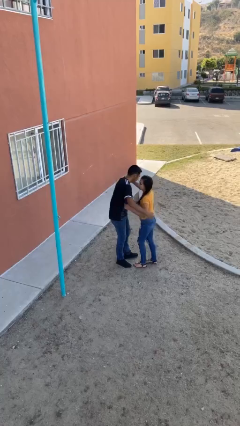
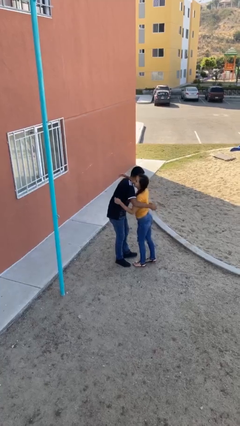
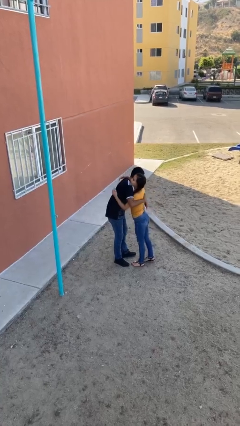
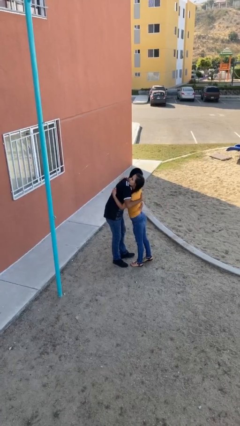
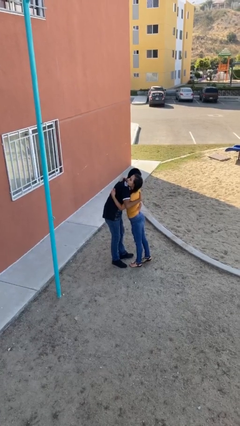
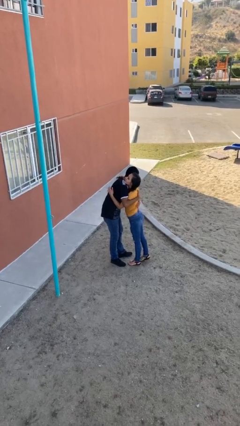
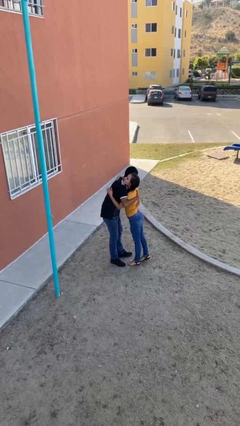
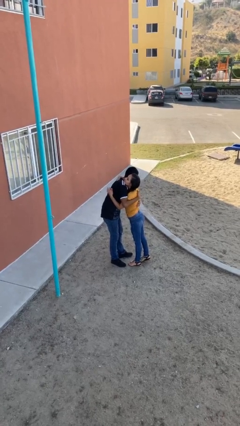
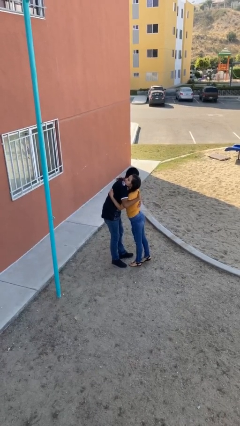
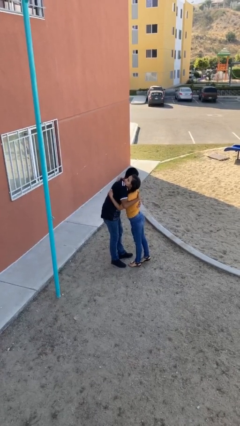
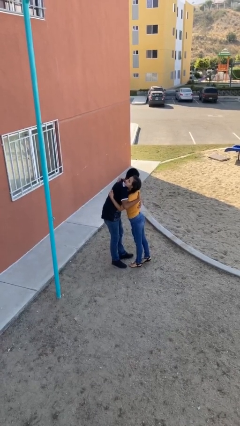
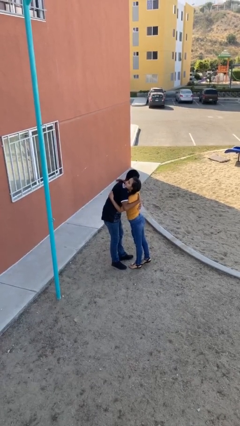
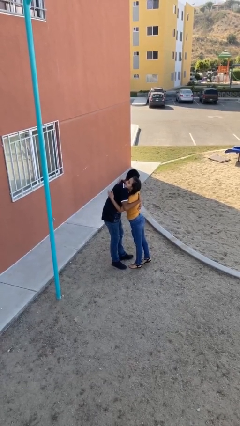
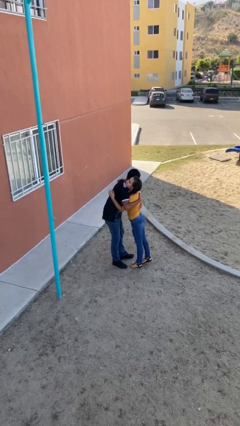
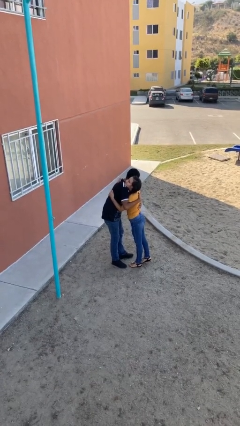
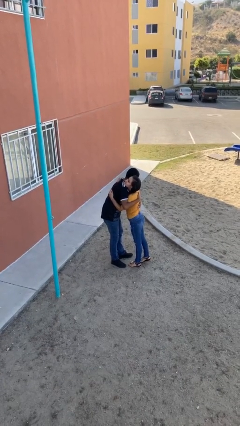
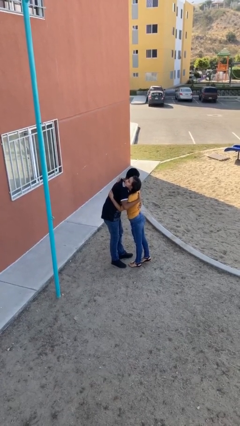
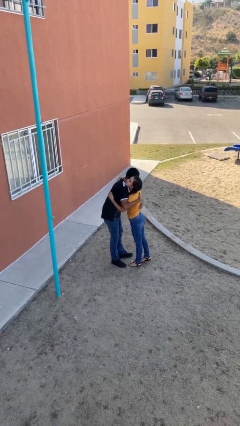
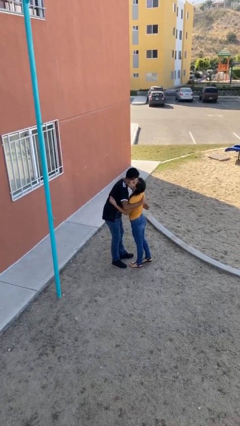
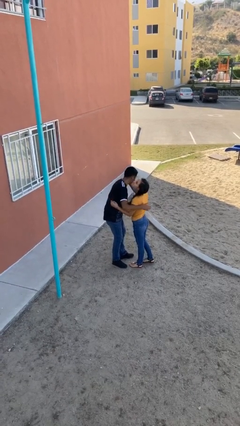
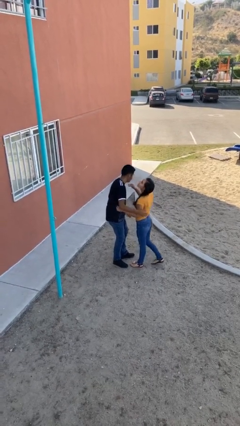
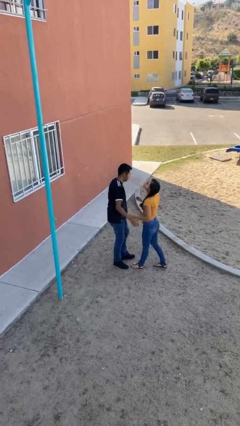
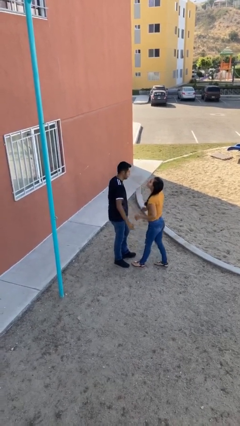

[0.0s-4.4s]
person embraces person

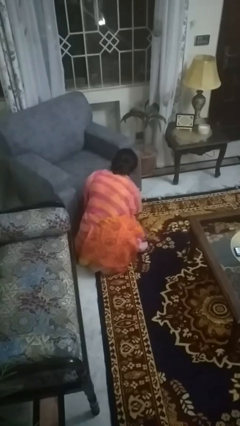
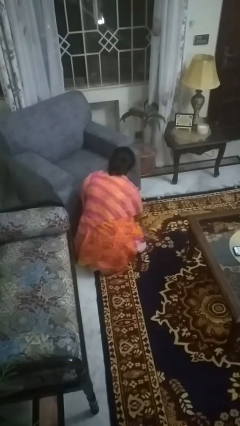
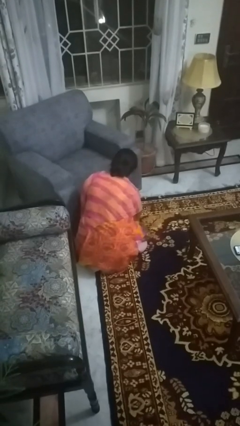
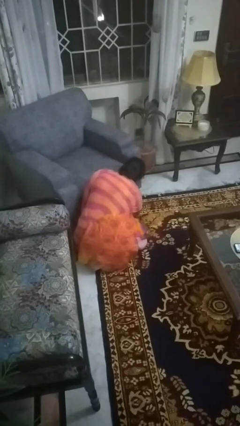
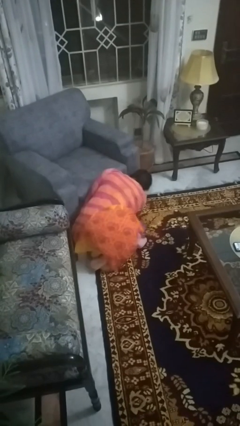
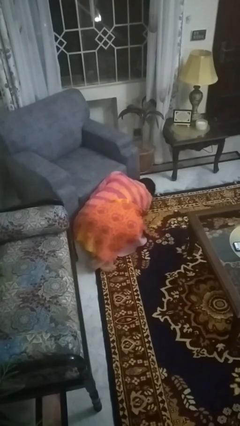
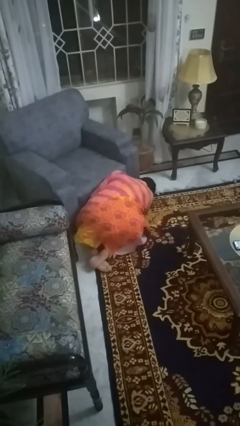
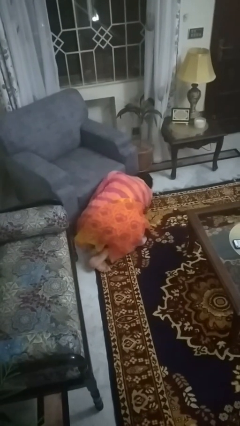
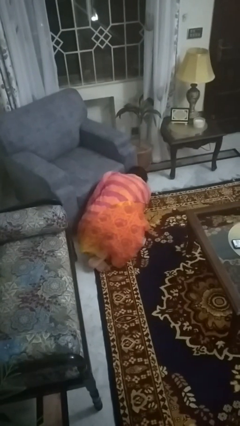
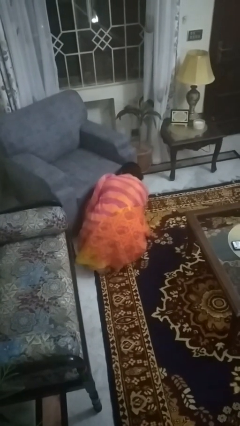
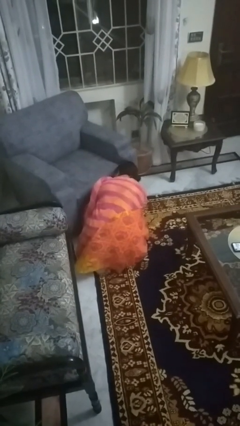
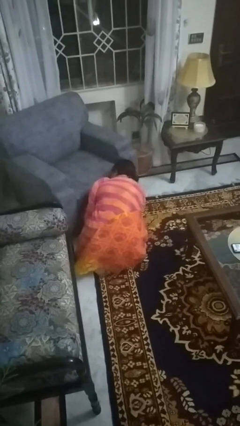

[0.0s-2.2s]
person searches under couch

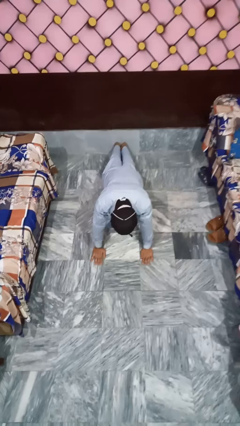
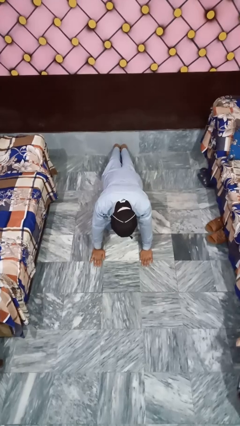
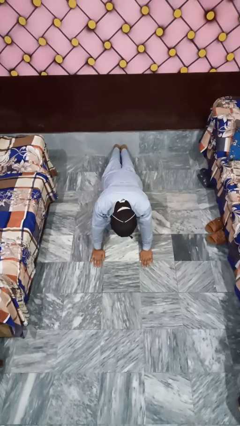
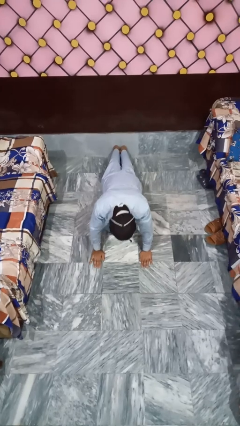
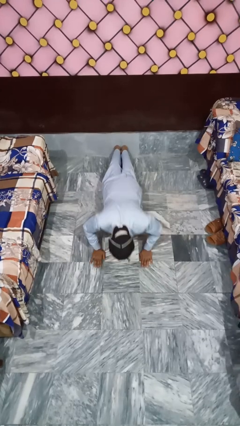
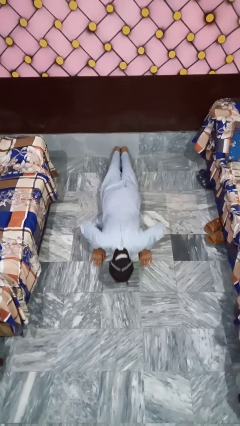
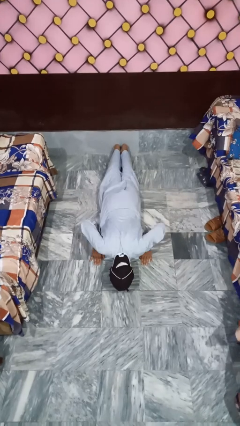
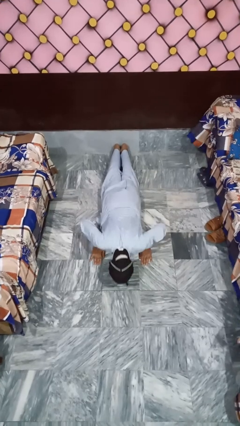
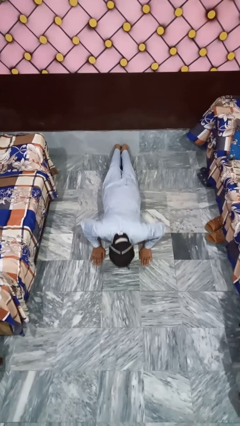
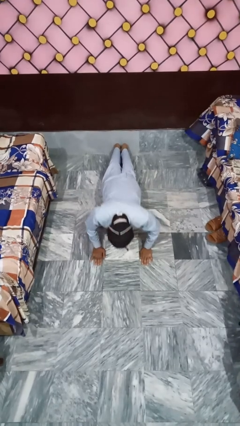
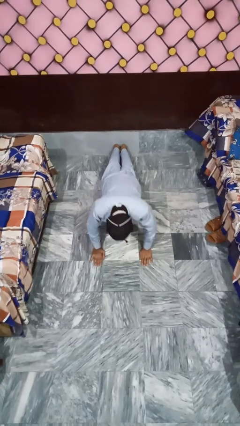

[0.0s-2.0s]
person exercises with pushup

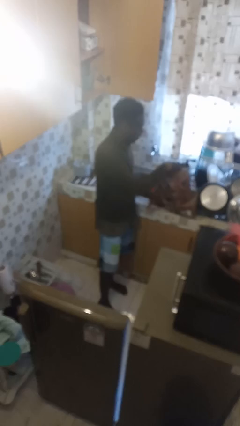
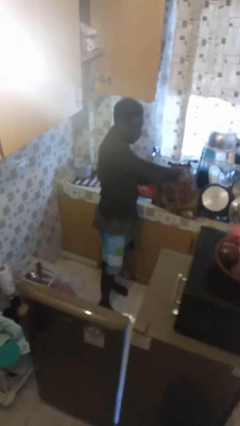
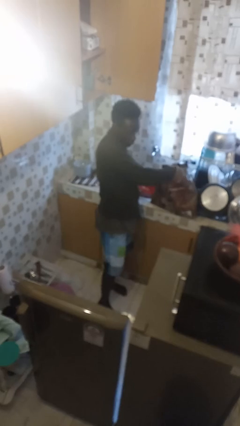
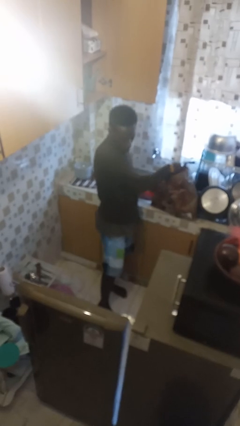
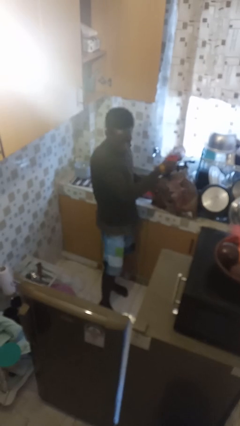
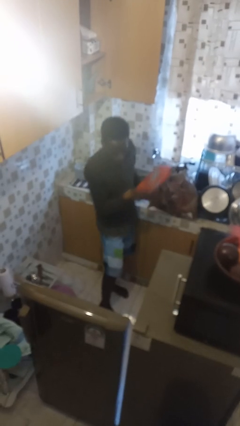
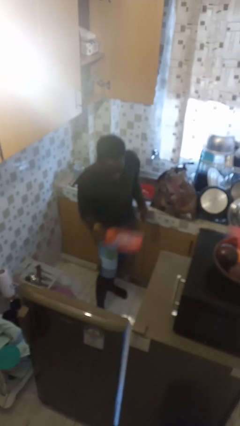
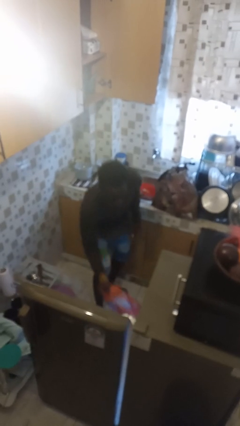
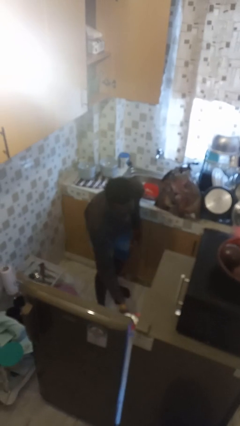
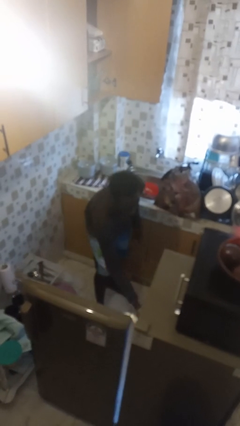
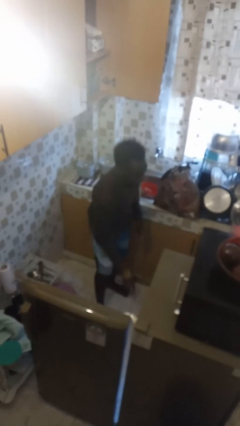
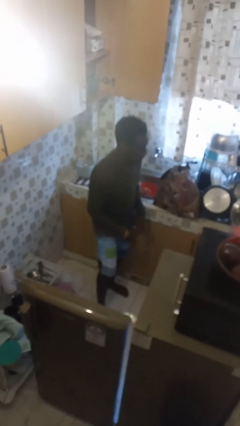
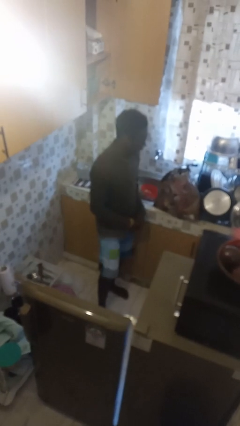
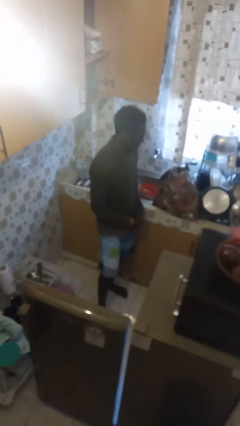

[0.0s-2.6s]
person loads groceries into refrigerator

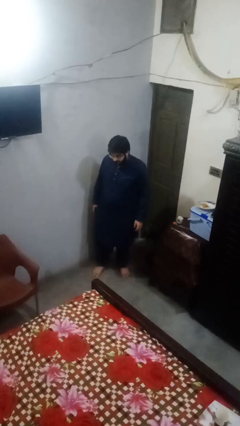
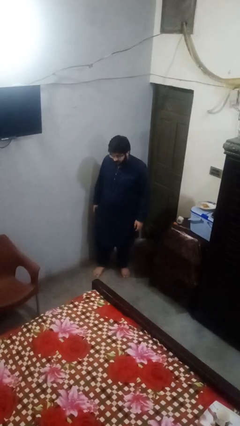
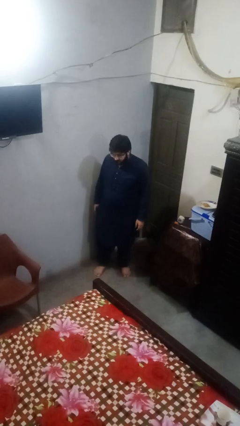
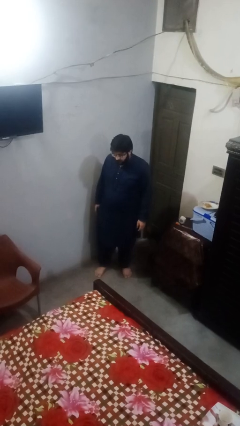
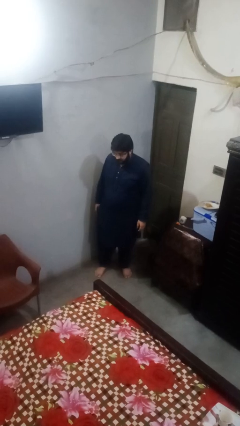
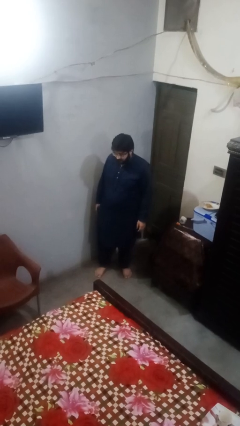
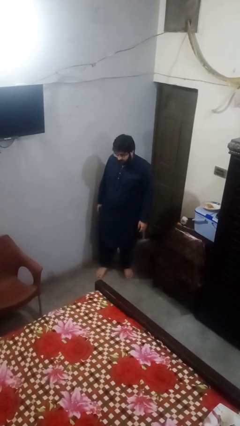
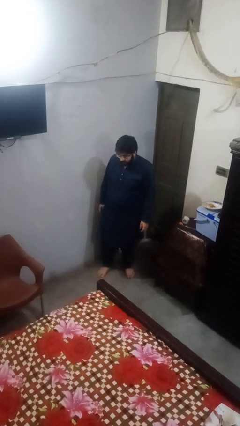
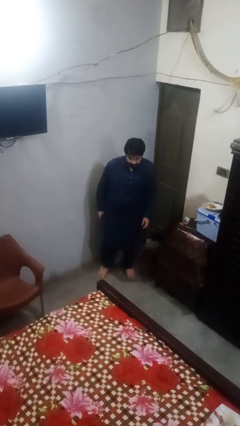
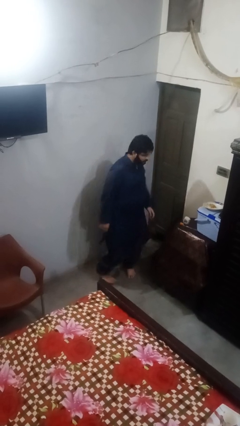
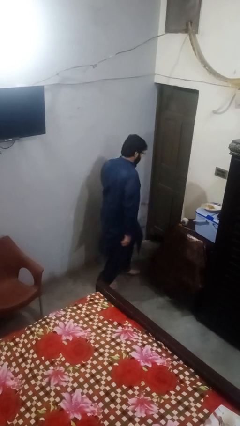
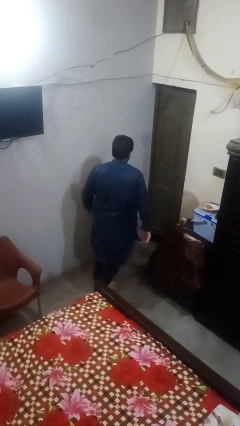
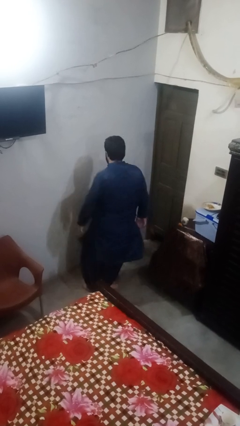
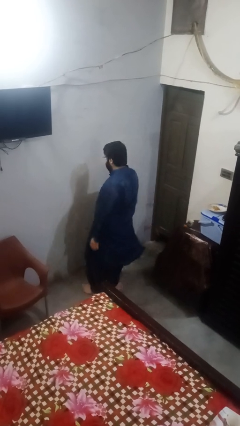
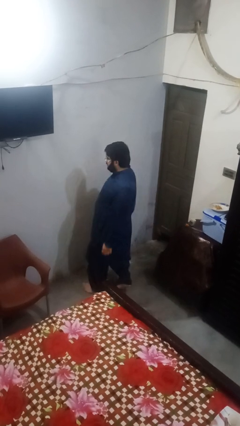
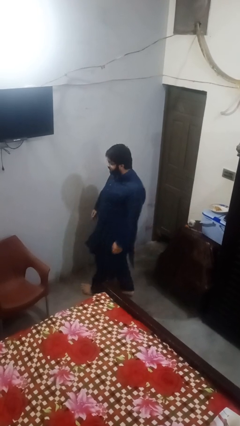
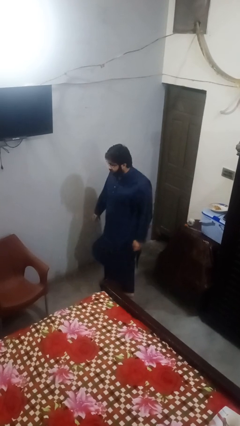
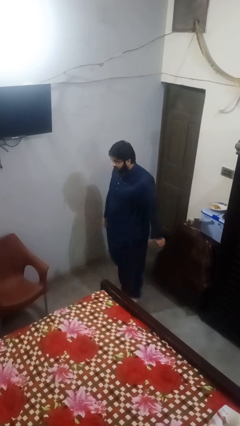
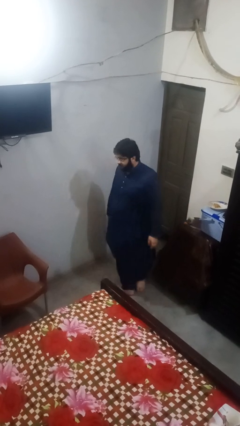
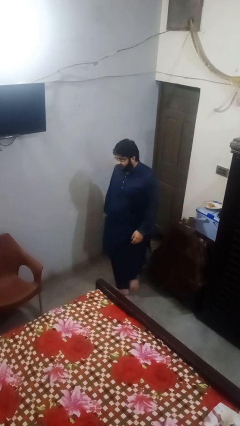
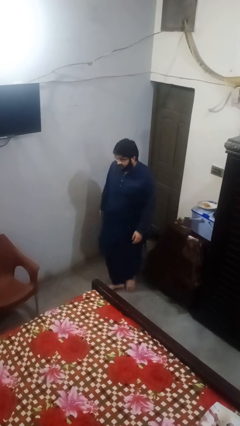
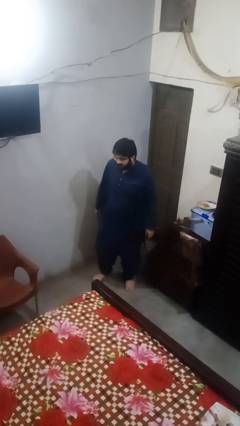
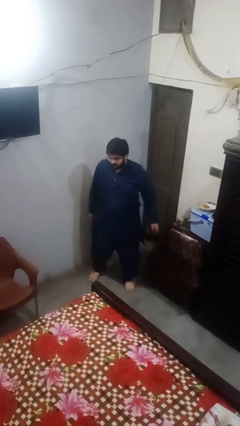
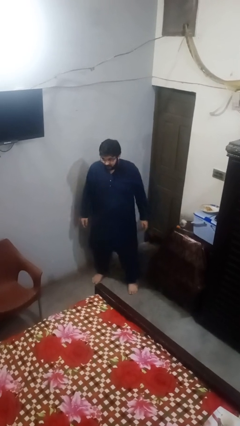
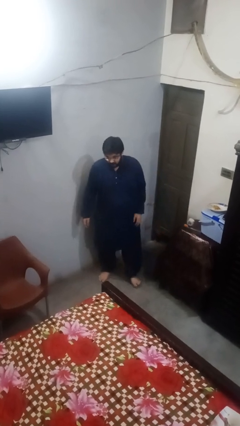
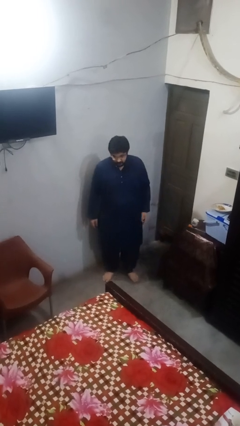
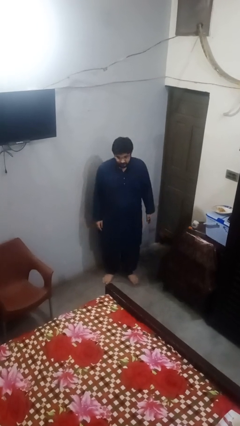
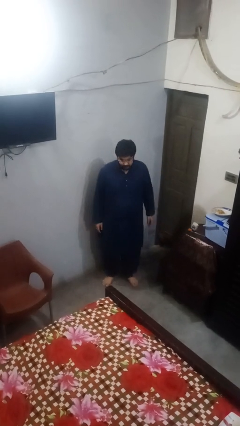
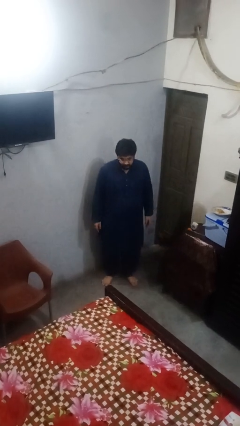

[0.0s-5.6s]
person twirls

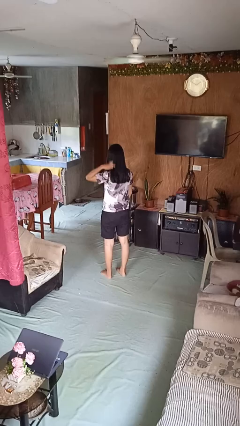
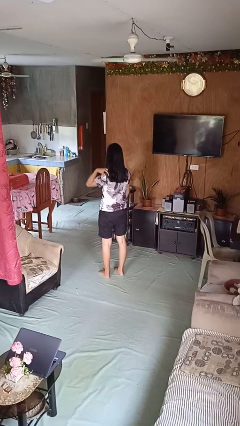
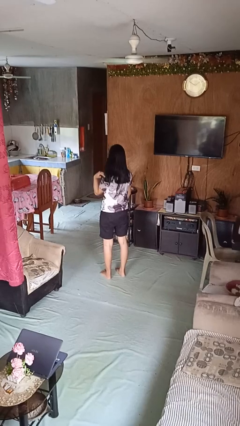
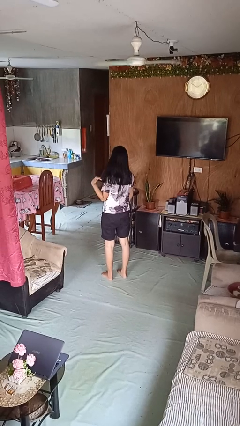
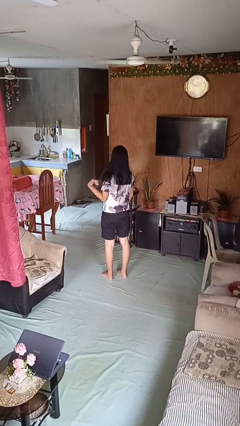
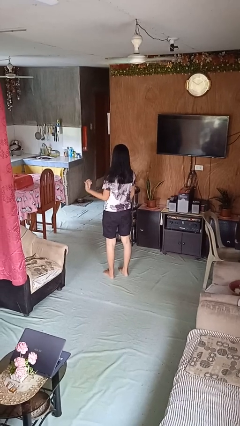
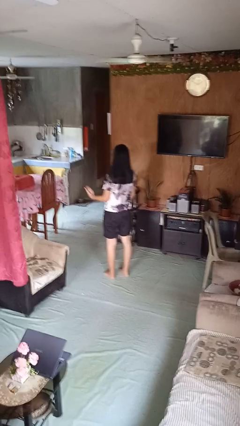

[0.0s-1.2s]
person strokes hair
